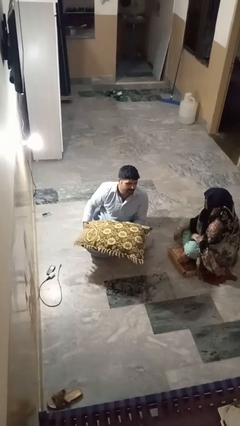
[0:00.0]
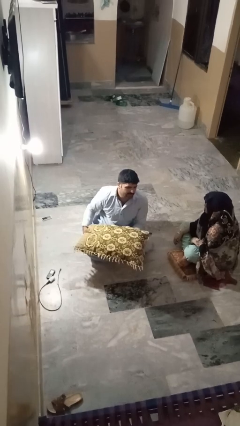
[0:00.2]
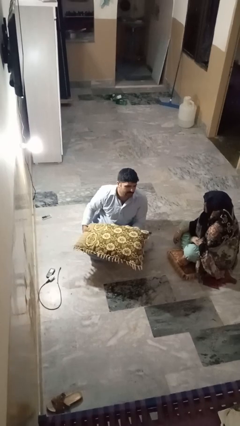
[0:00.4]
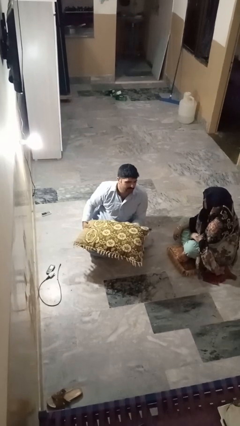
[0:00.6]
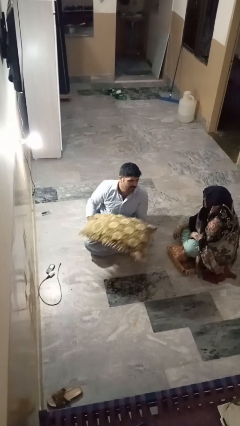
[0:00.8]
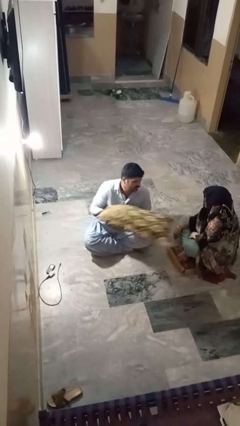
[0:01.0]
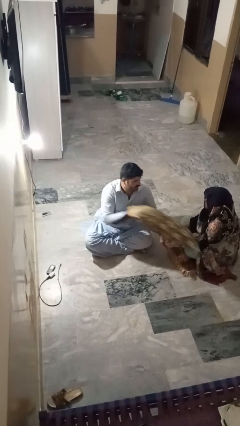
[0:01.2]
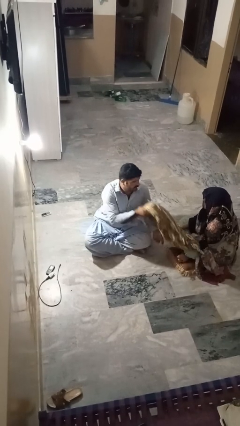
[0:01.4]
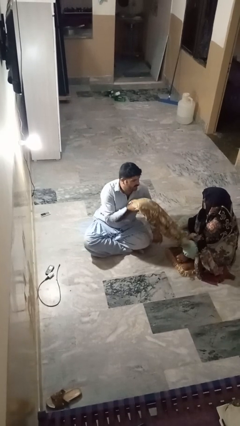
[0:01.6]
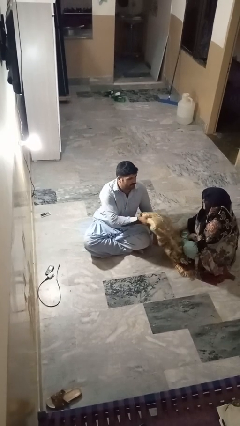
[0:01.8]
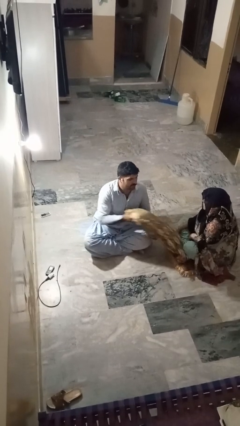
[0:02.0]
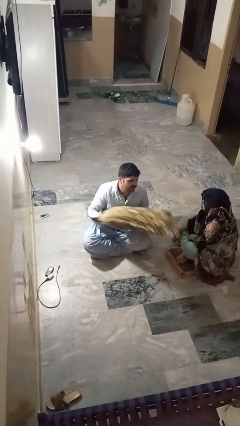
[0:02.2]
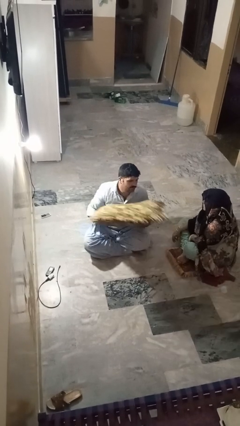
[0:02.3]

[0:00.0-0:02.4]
person hits person with pillow

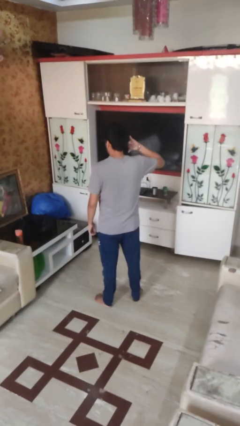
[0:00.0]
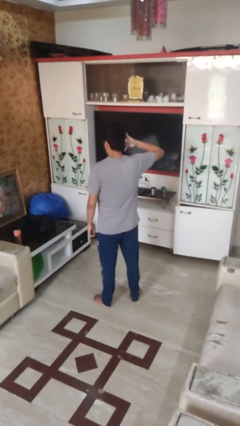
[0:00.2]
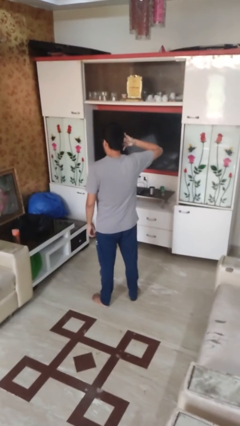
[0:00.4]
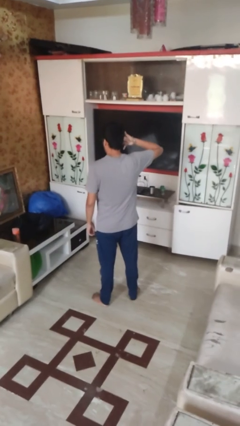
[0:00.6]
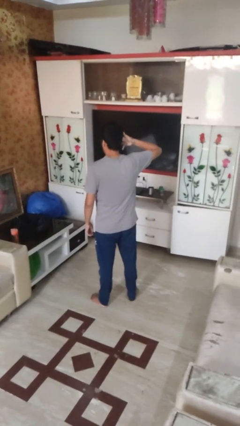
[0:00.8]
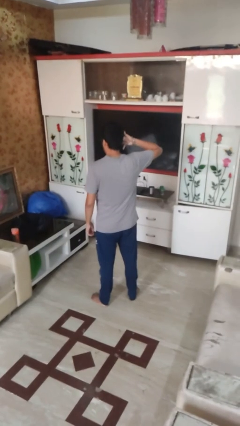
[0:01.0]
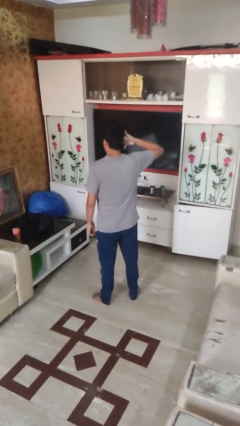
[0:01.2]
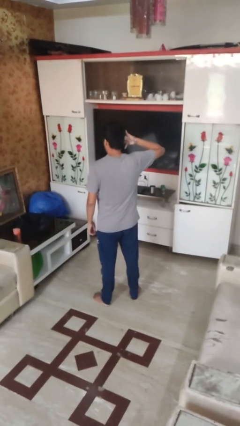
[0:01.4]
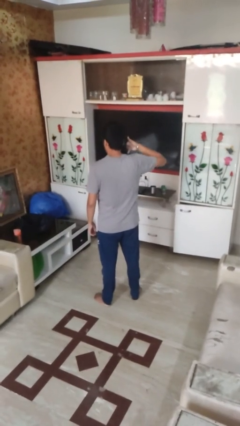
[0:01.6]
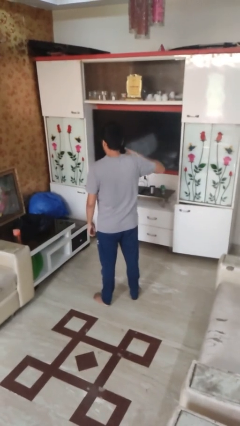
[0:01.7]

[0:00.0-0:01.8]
person gestures call me

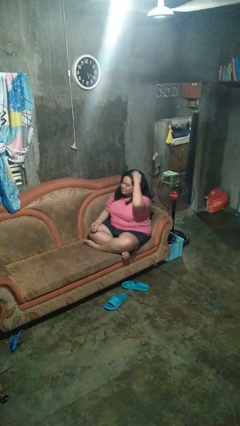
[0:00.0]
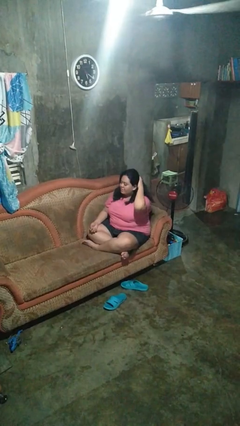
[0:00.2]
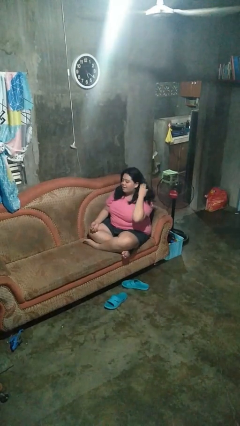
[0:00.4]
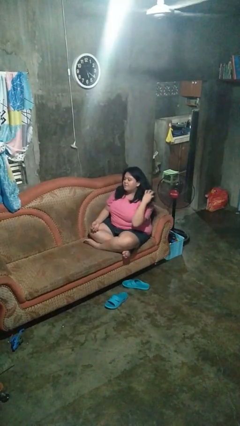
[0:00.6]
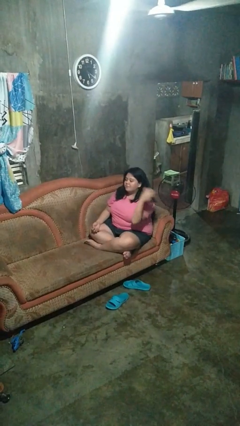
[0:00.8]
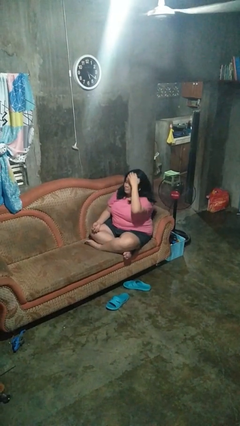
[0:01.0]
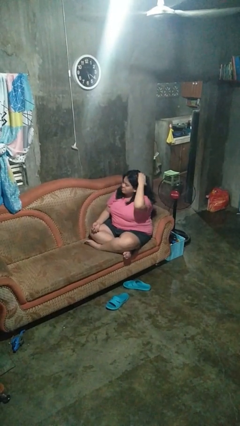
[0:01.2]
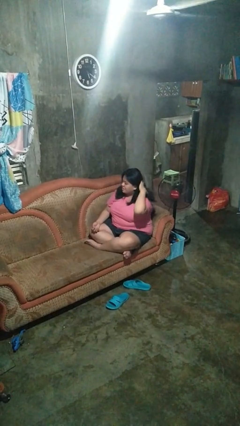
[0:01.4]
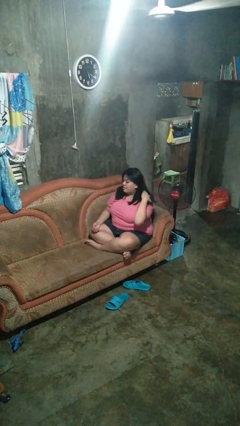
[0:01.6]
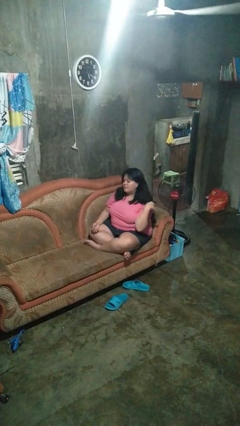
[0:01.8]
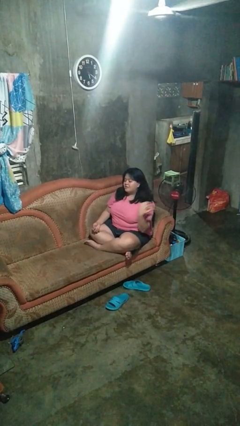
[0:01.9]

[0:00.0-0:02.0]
person strokes hair

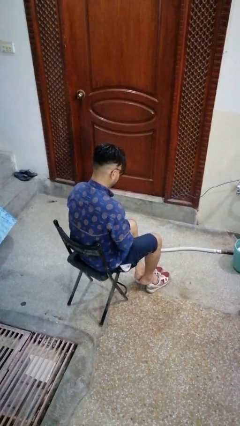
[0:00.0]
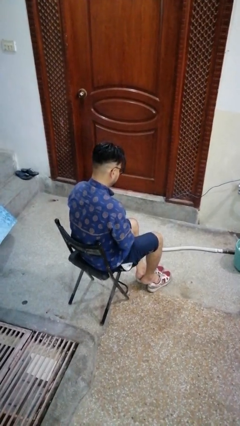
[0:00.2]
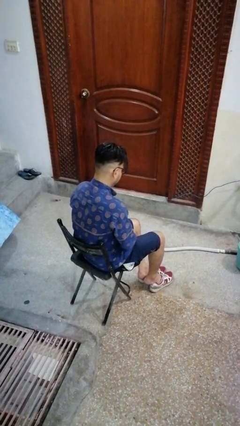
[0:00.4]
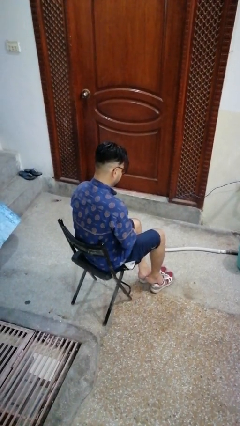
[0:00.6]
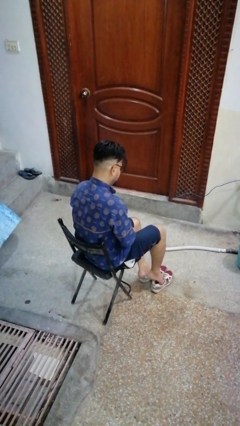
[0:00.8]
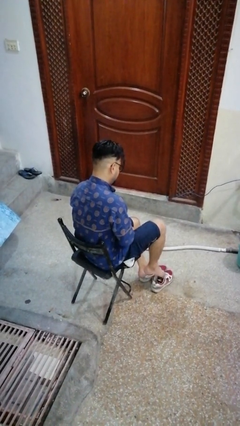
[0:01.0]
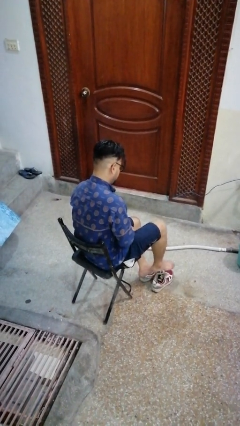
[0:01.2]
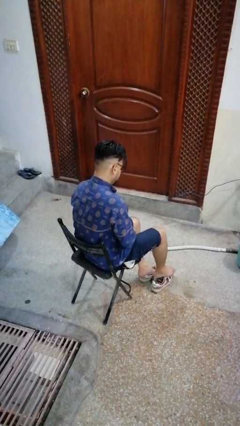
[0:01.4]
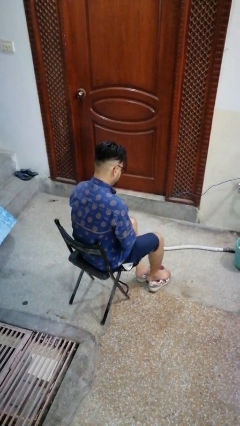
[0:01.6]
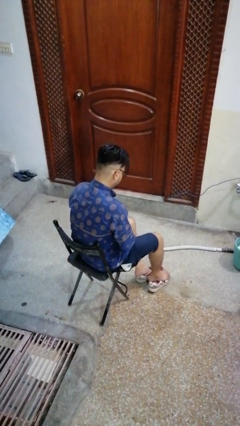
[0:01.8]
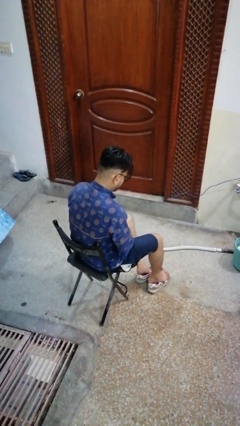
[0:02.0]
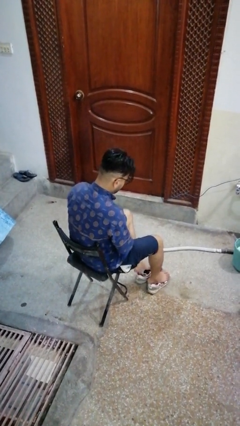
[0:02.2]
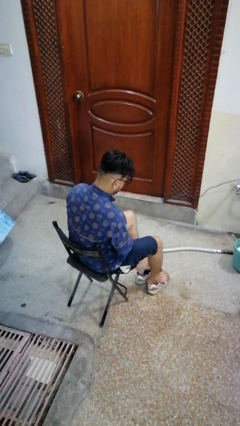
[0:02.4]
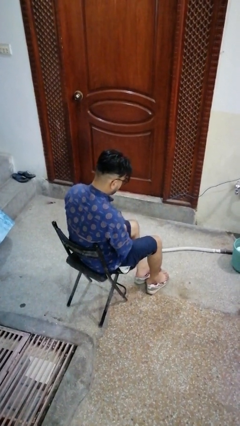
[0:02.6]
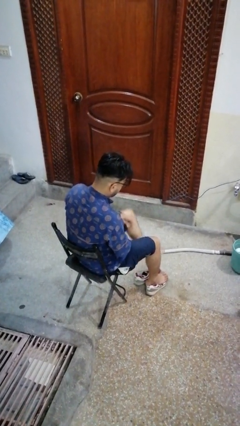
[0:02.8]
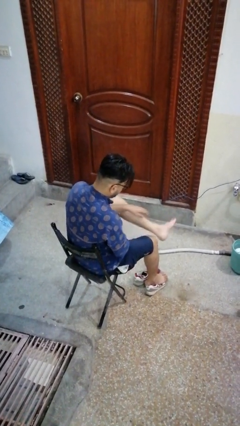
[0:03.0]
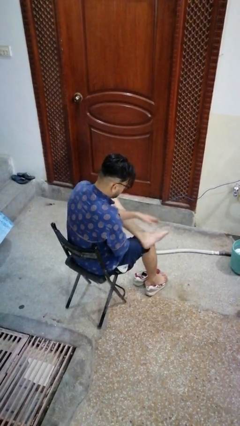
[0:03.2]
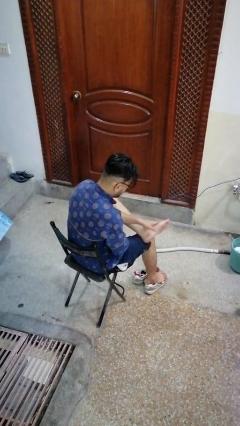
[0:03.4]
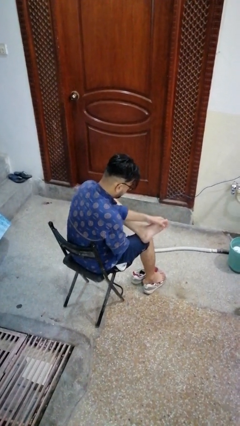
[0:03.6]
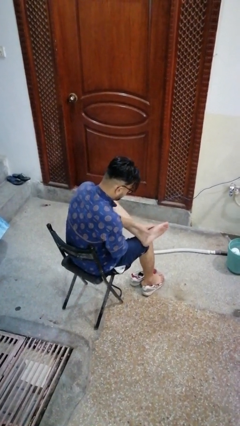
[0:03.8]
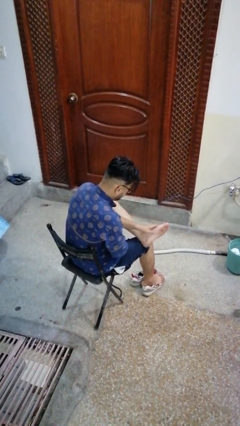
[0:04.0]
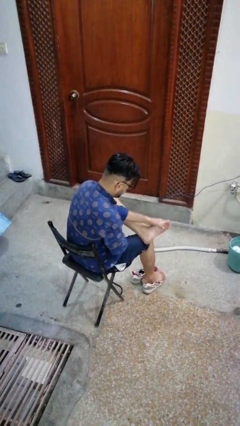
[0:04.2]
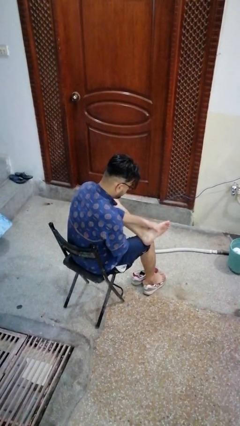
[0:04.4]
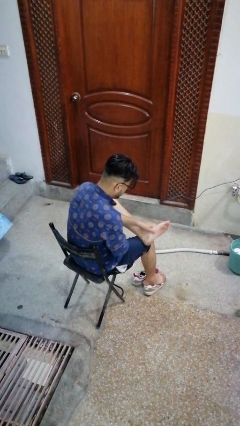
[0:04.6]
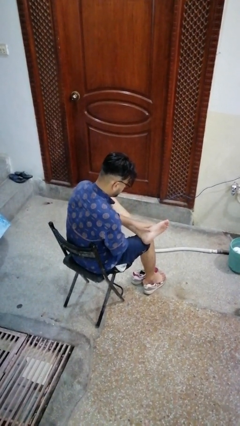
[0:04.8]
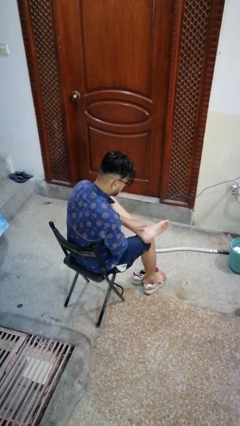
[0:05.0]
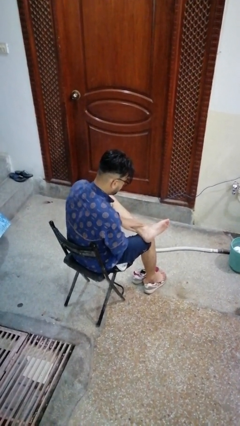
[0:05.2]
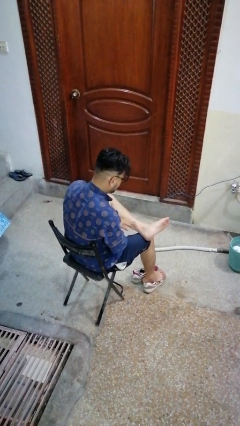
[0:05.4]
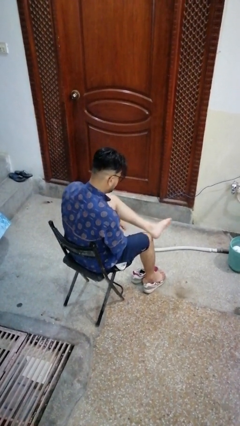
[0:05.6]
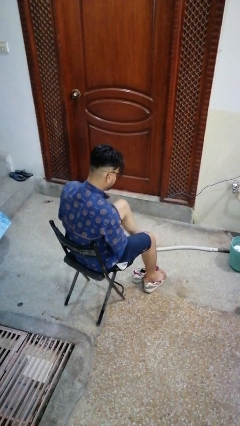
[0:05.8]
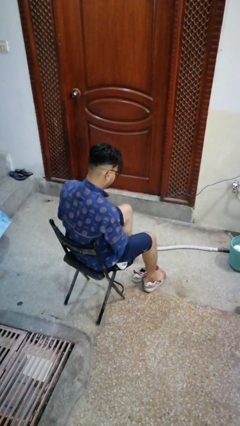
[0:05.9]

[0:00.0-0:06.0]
person rubs foot

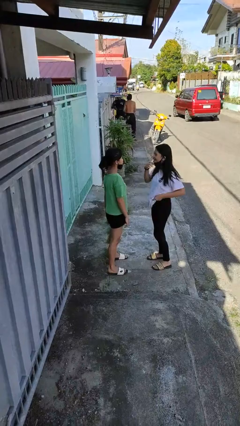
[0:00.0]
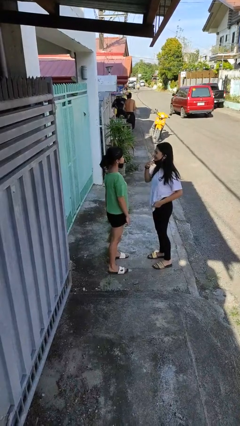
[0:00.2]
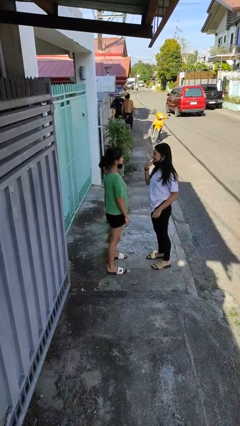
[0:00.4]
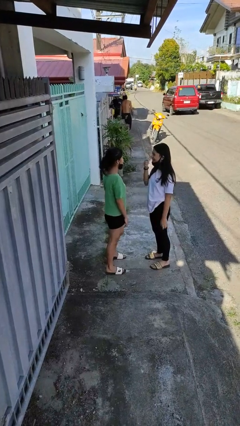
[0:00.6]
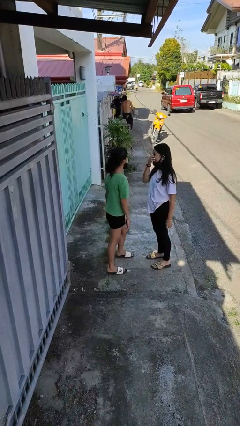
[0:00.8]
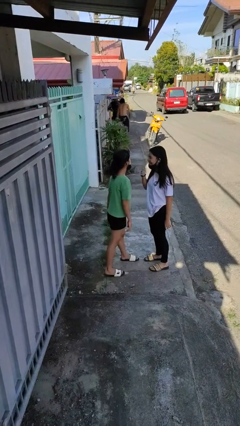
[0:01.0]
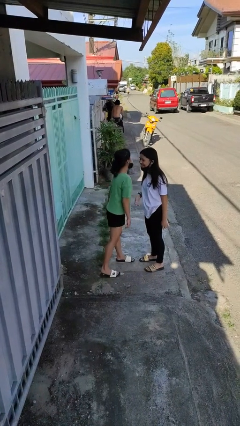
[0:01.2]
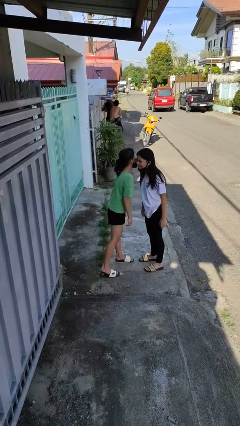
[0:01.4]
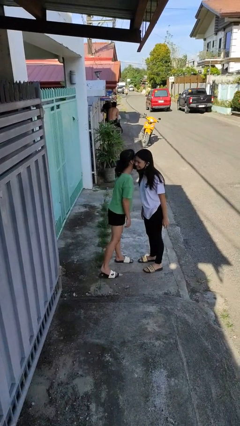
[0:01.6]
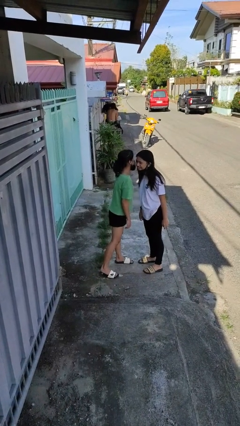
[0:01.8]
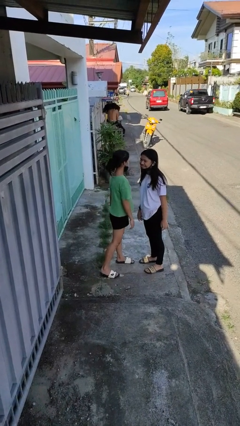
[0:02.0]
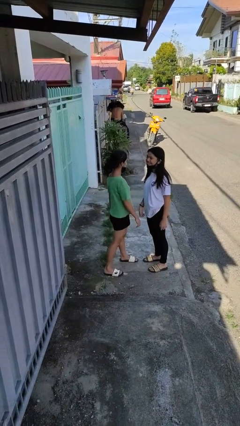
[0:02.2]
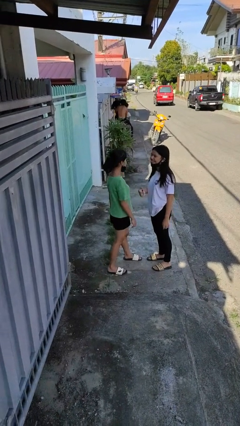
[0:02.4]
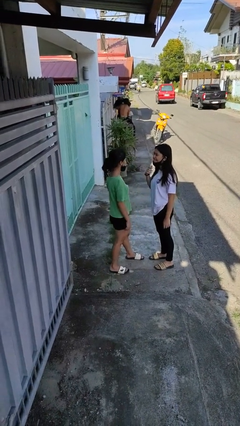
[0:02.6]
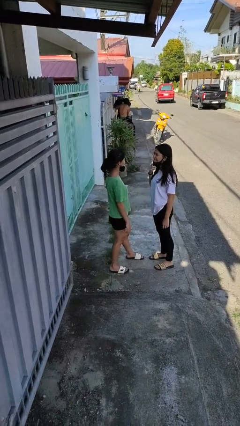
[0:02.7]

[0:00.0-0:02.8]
person kisses cheek of person

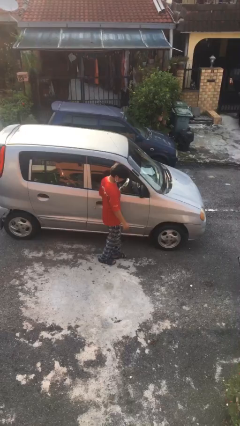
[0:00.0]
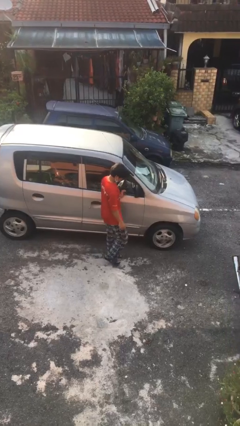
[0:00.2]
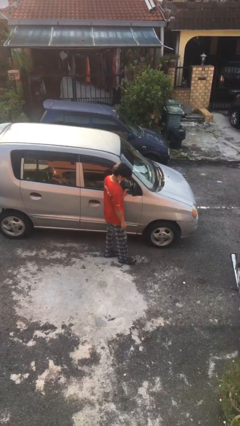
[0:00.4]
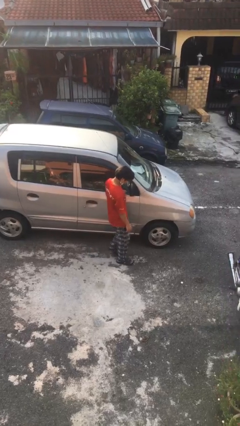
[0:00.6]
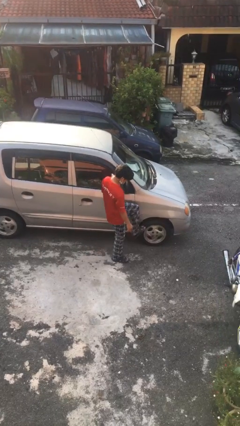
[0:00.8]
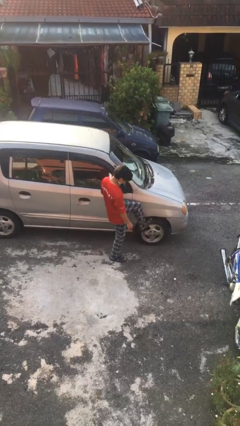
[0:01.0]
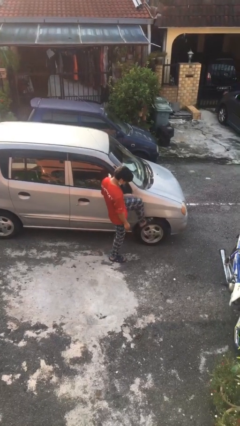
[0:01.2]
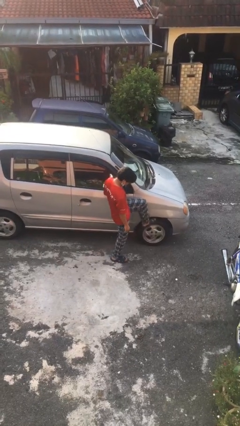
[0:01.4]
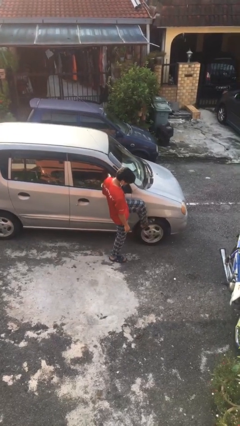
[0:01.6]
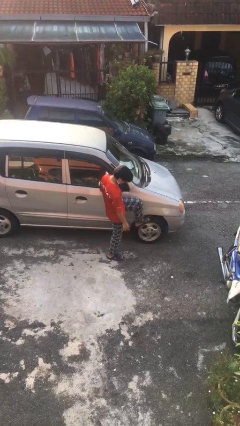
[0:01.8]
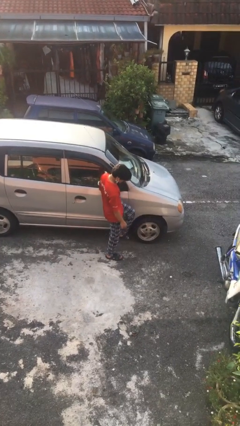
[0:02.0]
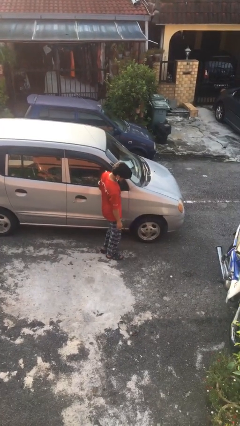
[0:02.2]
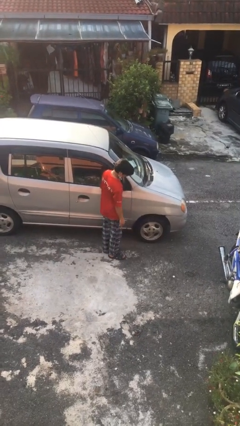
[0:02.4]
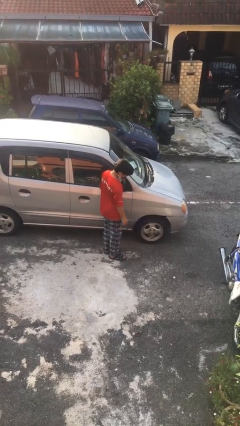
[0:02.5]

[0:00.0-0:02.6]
person kicks car tires
